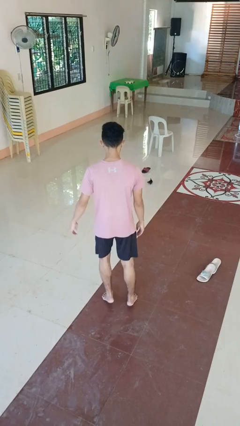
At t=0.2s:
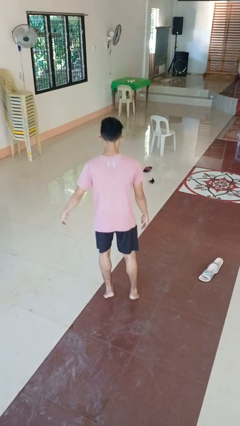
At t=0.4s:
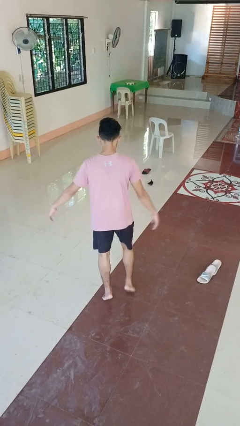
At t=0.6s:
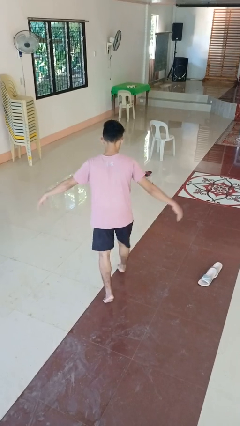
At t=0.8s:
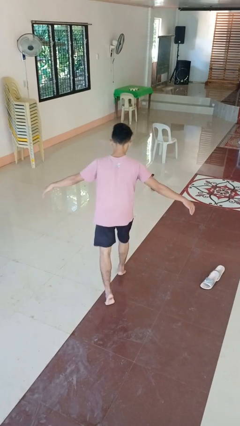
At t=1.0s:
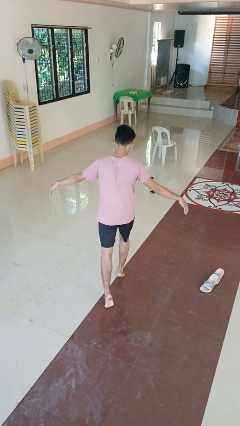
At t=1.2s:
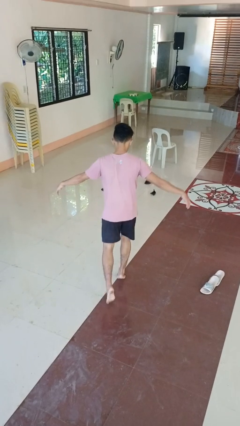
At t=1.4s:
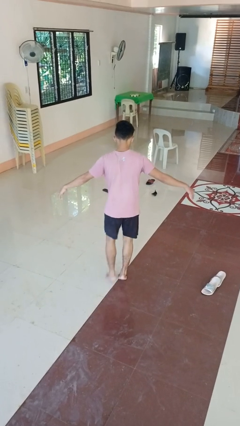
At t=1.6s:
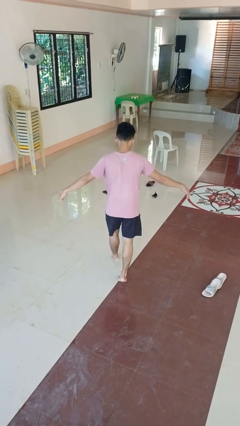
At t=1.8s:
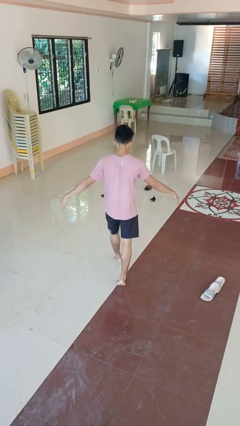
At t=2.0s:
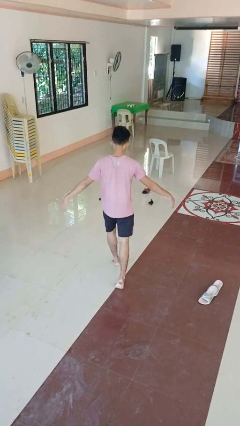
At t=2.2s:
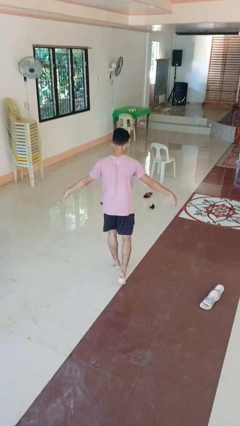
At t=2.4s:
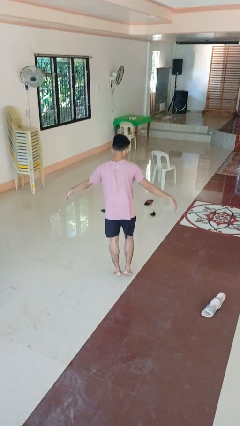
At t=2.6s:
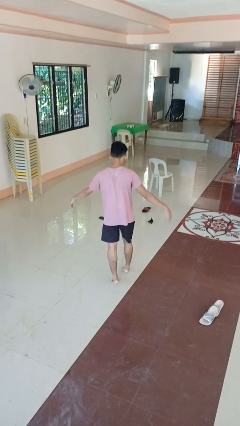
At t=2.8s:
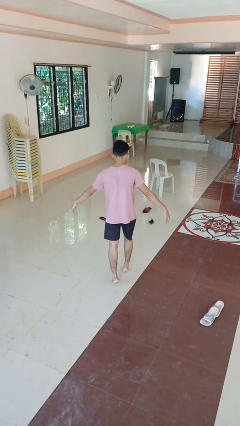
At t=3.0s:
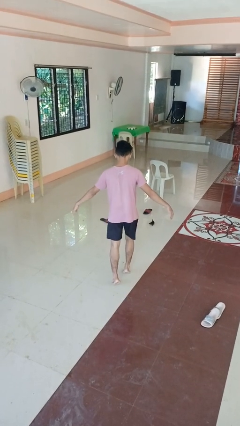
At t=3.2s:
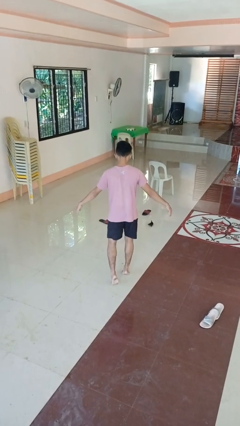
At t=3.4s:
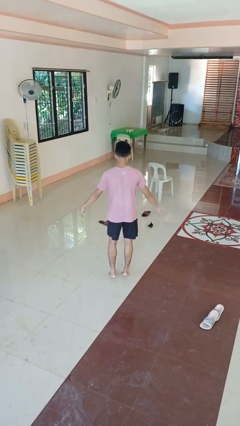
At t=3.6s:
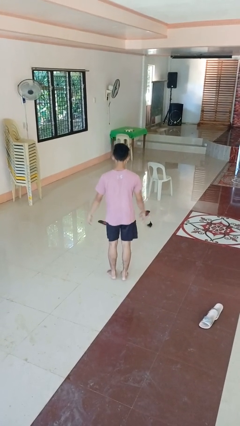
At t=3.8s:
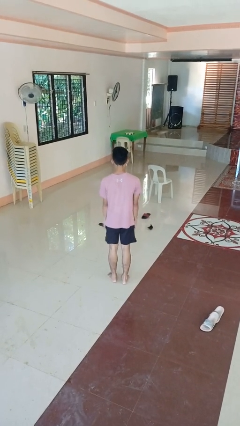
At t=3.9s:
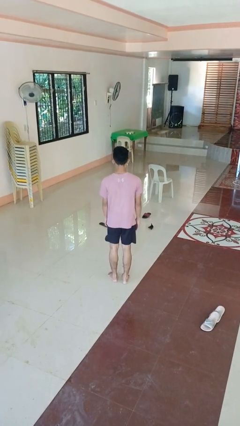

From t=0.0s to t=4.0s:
person walks tiptoe

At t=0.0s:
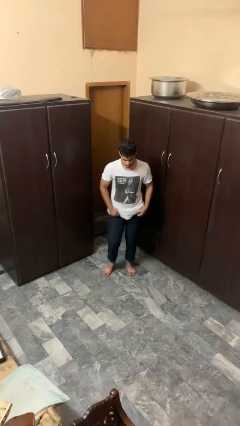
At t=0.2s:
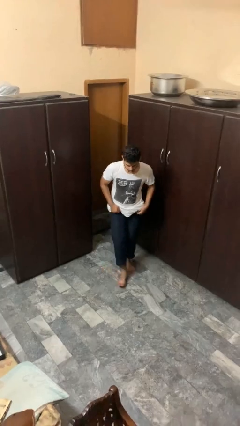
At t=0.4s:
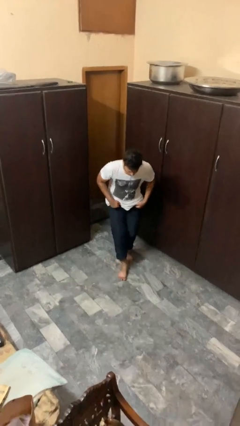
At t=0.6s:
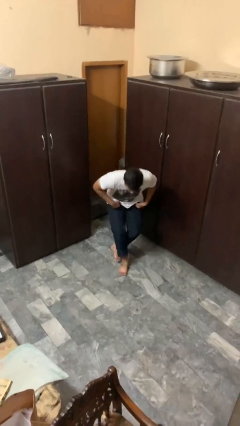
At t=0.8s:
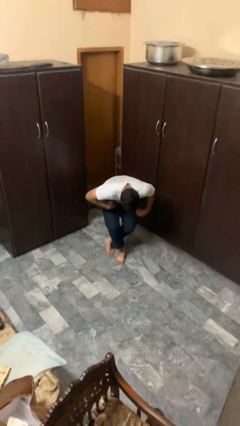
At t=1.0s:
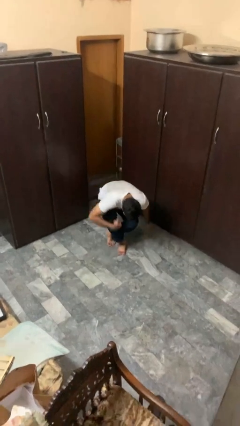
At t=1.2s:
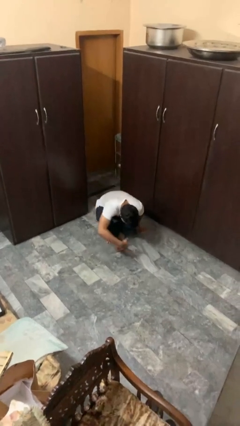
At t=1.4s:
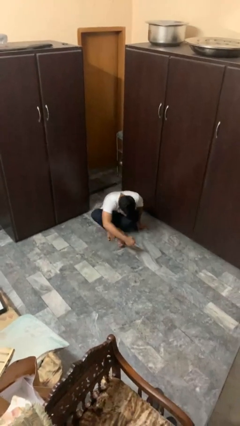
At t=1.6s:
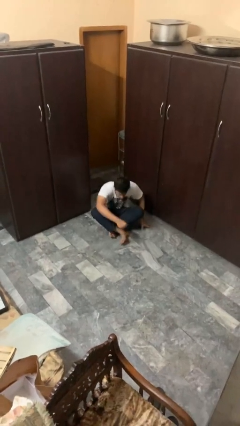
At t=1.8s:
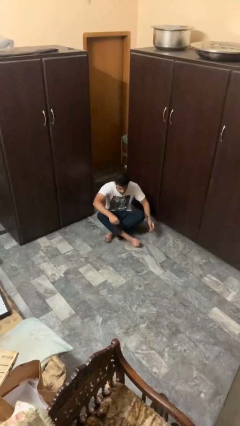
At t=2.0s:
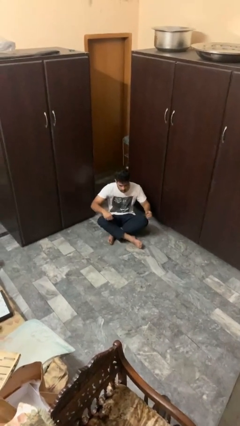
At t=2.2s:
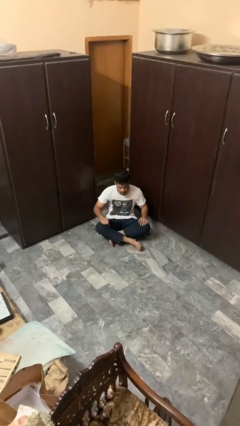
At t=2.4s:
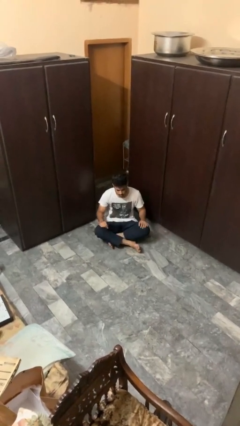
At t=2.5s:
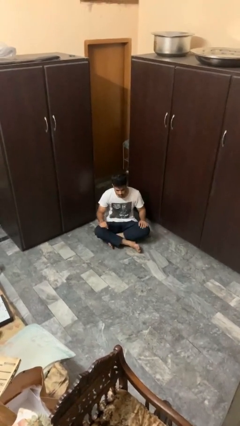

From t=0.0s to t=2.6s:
person sits crisscross

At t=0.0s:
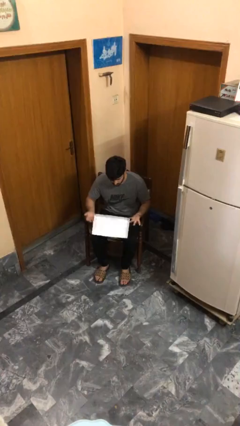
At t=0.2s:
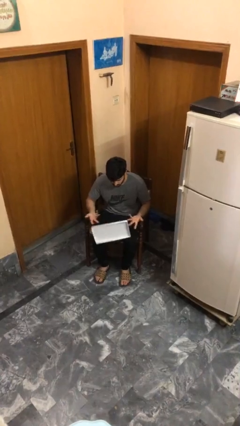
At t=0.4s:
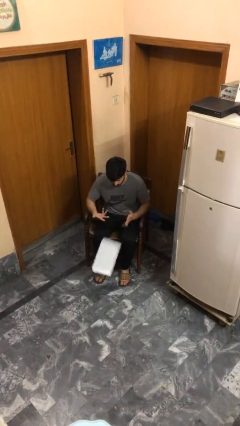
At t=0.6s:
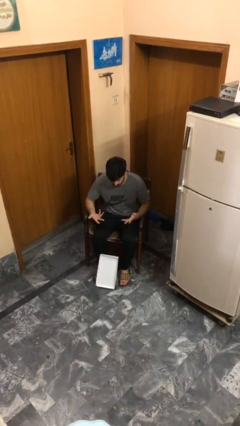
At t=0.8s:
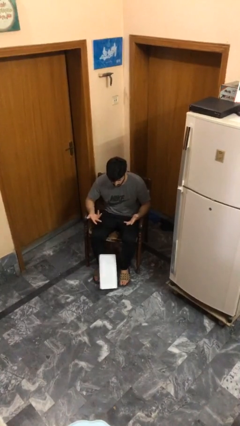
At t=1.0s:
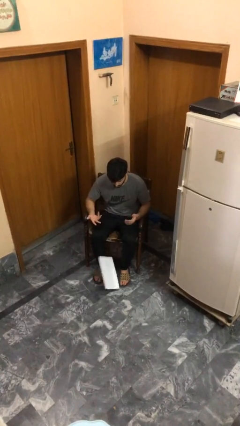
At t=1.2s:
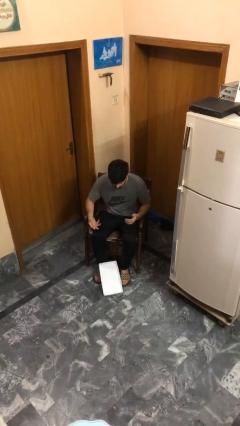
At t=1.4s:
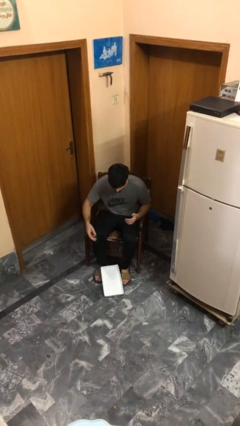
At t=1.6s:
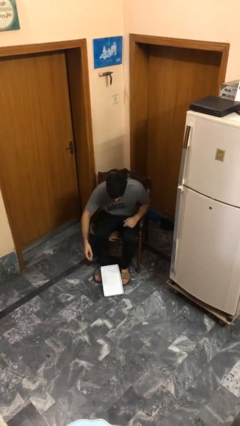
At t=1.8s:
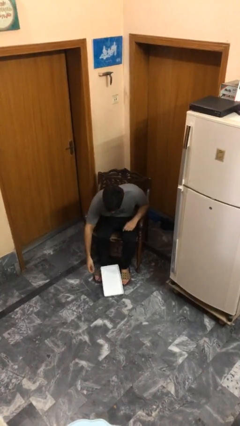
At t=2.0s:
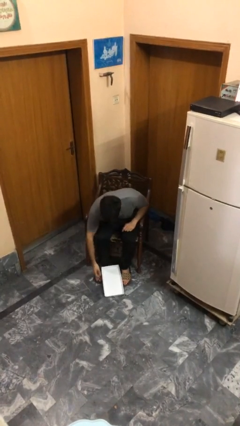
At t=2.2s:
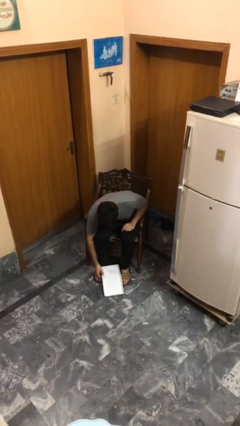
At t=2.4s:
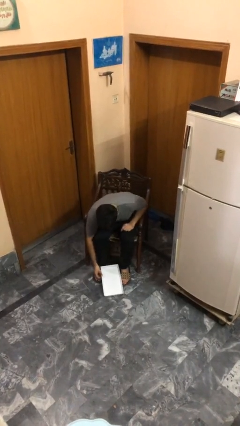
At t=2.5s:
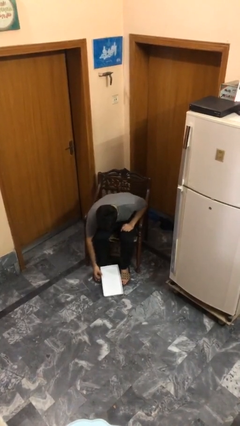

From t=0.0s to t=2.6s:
person drops object

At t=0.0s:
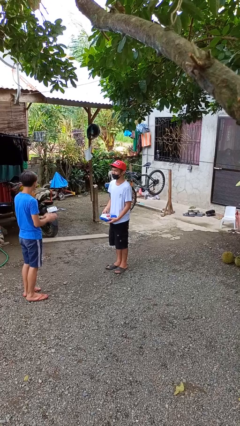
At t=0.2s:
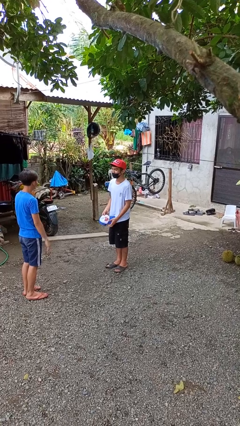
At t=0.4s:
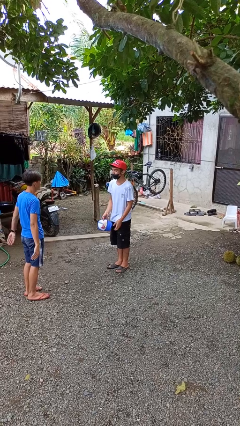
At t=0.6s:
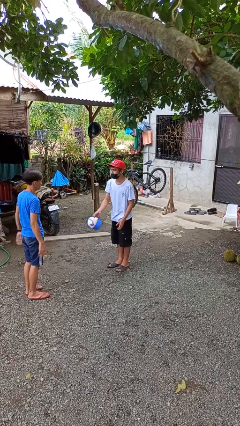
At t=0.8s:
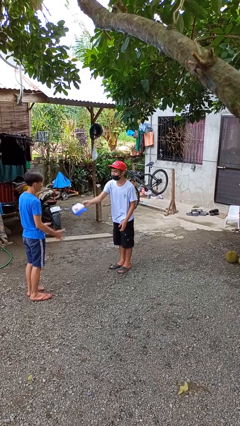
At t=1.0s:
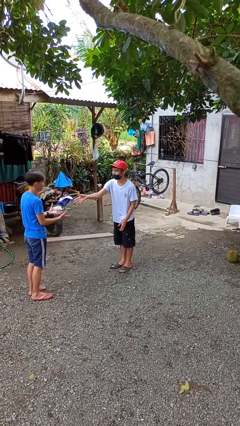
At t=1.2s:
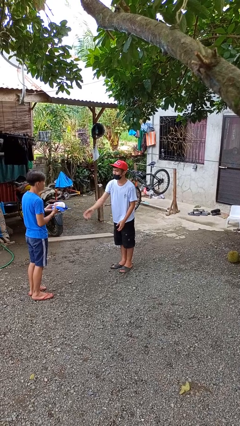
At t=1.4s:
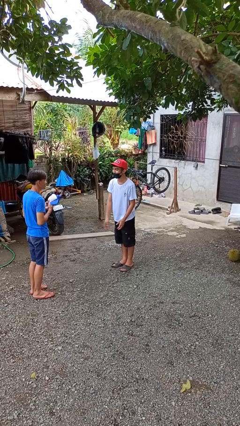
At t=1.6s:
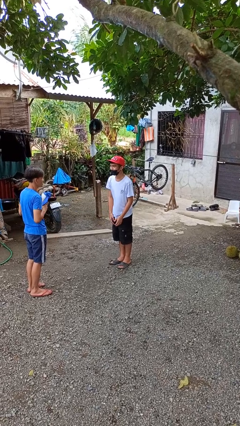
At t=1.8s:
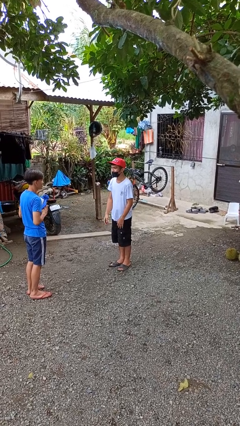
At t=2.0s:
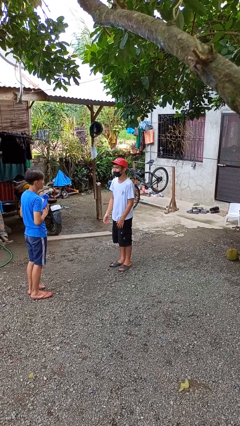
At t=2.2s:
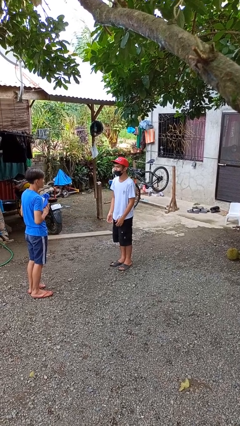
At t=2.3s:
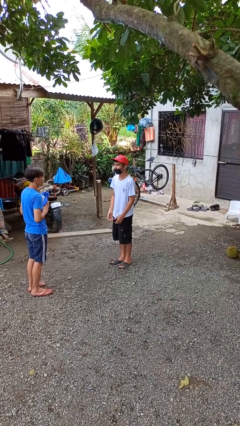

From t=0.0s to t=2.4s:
person throws object to person

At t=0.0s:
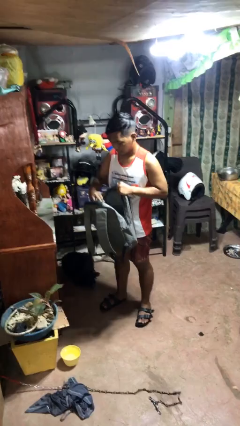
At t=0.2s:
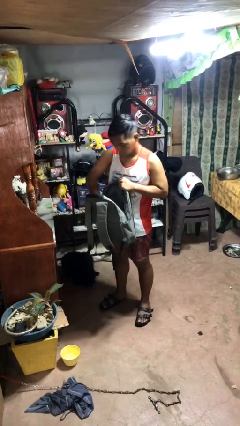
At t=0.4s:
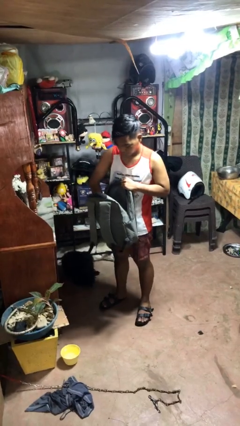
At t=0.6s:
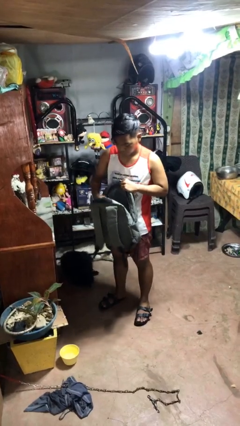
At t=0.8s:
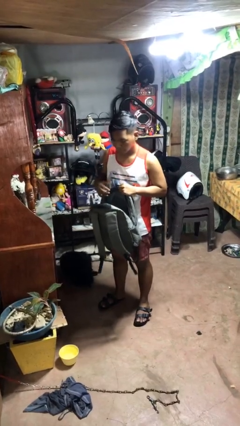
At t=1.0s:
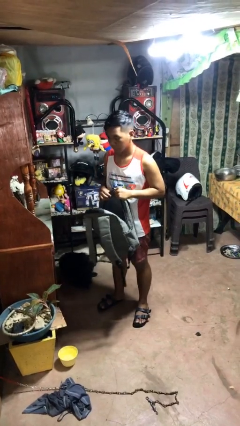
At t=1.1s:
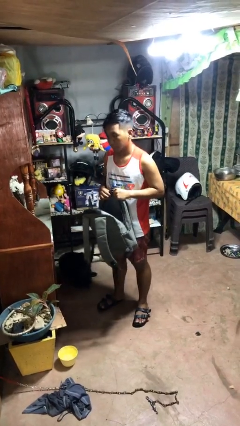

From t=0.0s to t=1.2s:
person puts object into bag

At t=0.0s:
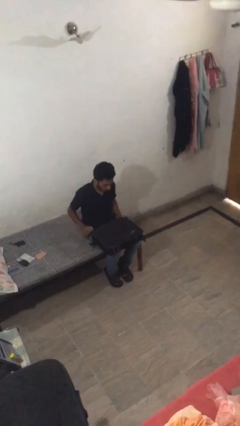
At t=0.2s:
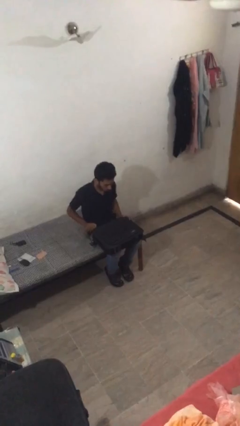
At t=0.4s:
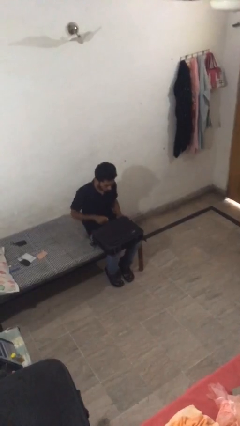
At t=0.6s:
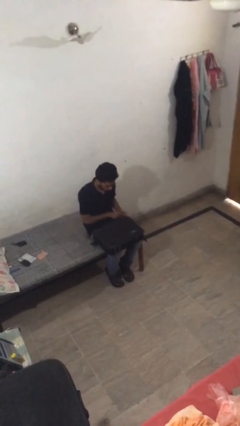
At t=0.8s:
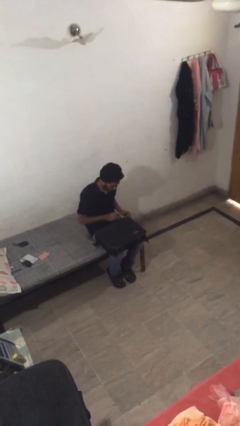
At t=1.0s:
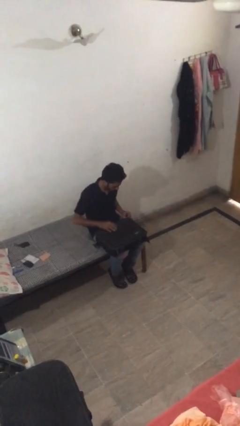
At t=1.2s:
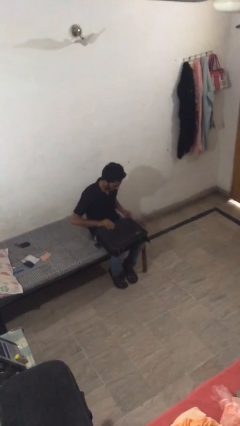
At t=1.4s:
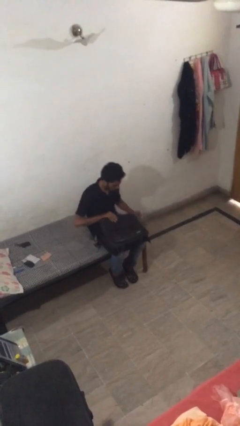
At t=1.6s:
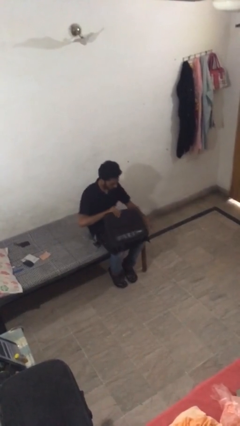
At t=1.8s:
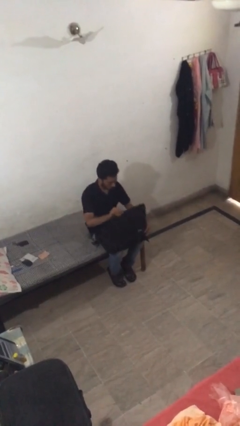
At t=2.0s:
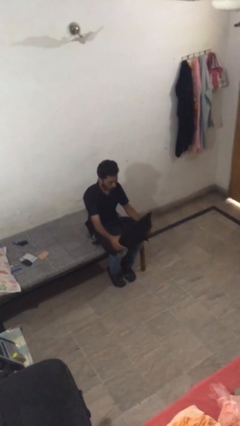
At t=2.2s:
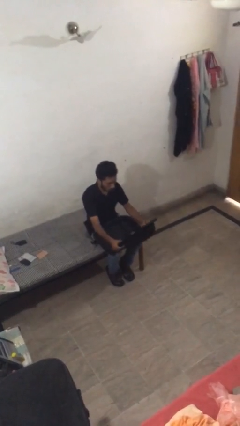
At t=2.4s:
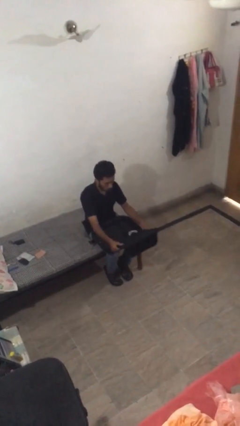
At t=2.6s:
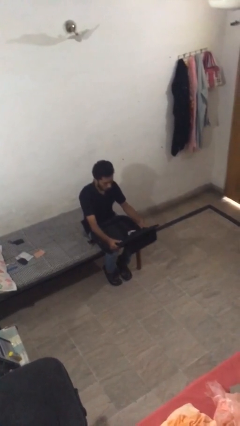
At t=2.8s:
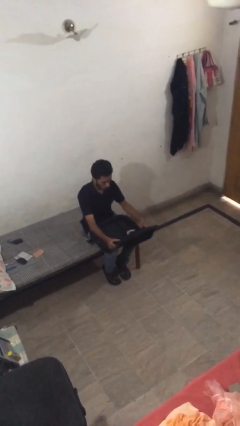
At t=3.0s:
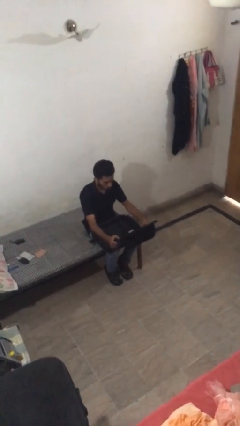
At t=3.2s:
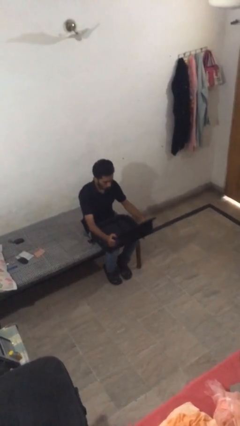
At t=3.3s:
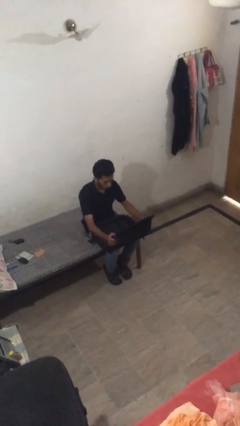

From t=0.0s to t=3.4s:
person opens suitcase

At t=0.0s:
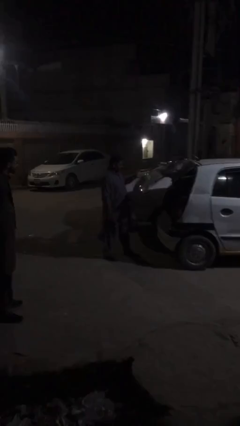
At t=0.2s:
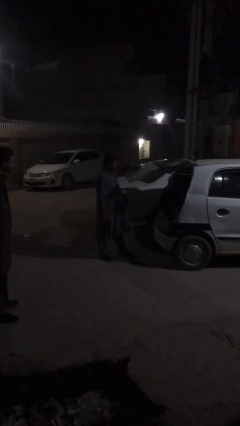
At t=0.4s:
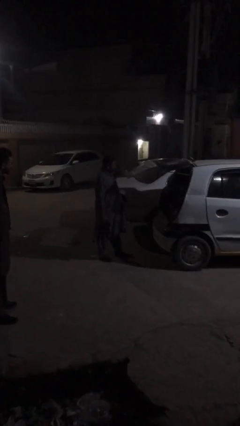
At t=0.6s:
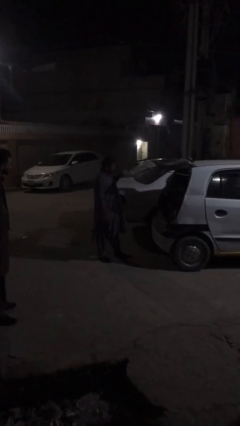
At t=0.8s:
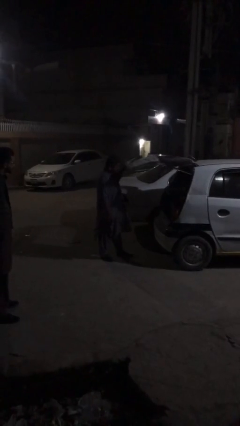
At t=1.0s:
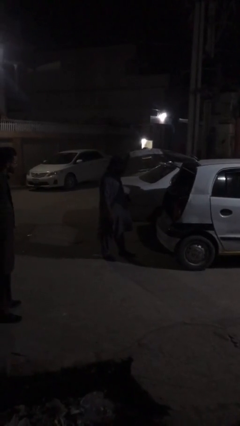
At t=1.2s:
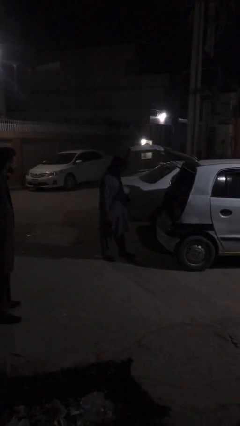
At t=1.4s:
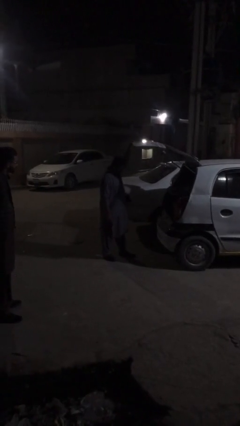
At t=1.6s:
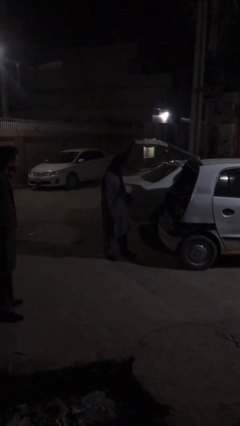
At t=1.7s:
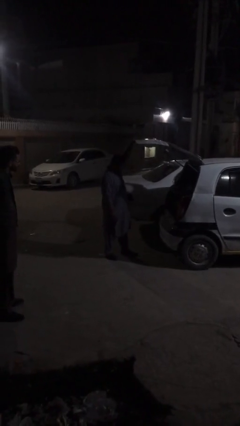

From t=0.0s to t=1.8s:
person opens car trunk
